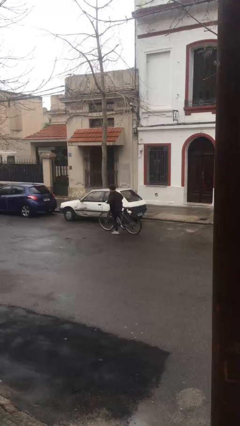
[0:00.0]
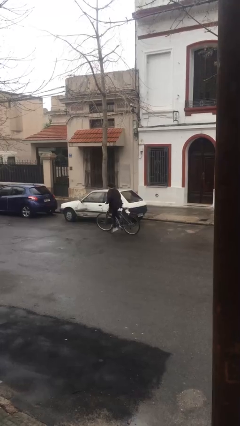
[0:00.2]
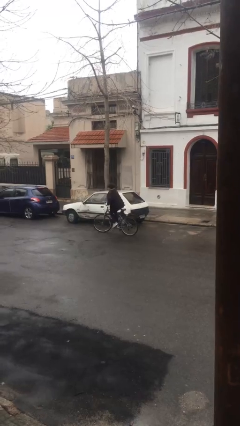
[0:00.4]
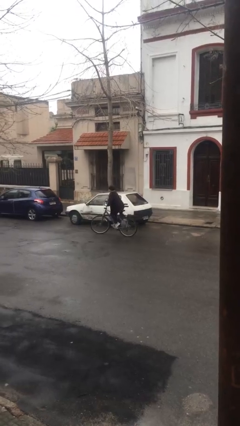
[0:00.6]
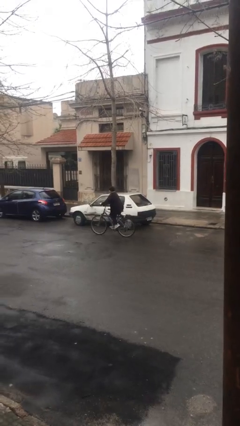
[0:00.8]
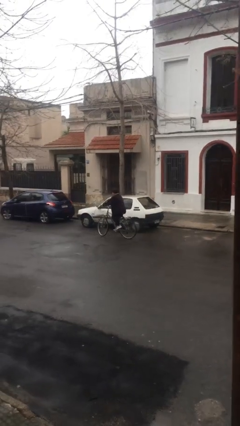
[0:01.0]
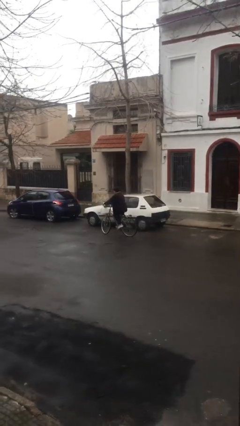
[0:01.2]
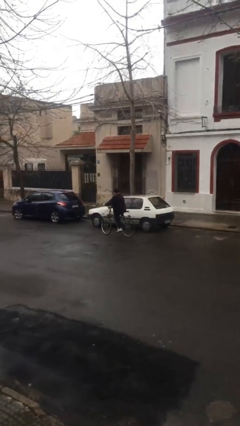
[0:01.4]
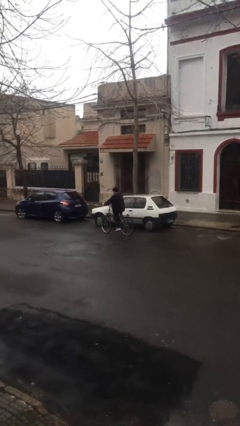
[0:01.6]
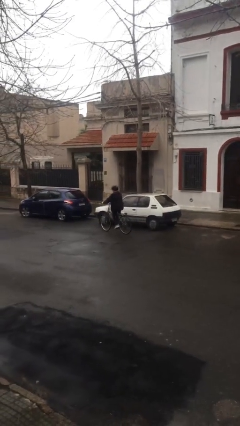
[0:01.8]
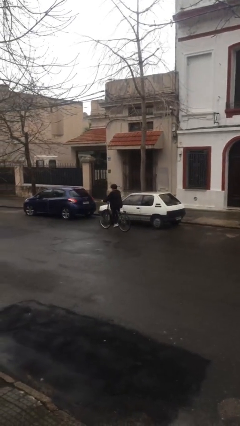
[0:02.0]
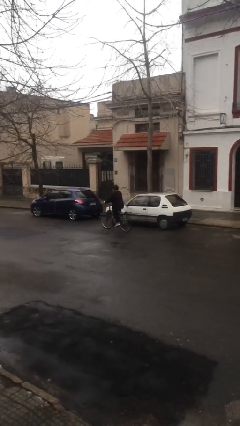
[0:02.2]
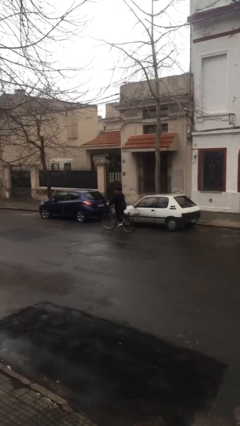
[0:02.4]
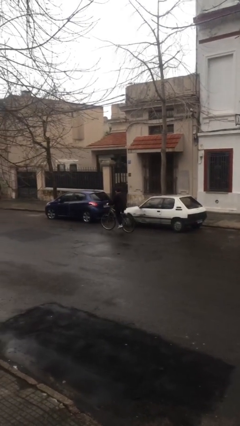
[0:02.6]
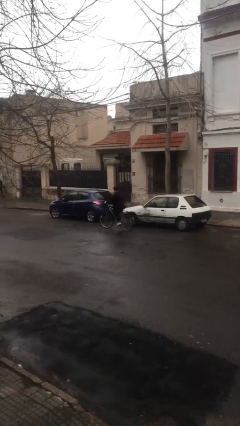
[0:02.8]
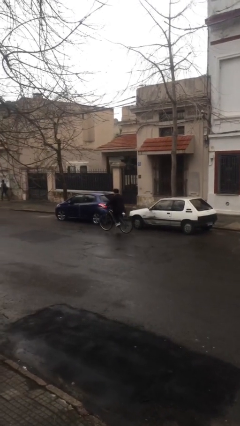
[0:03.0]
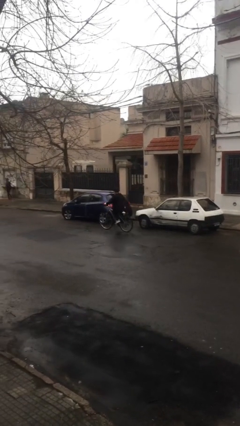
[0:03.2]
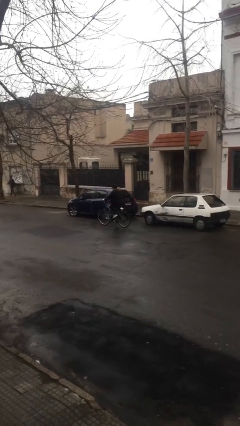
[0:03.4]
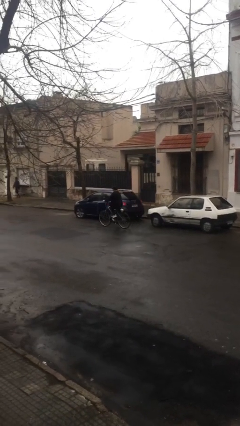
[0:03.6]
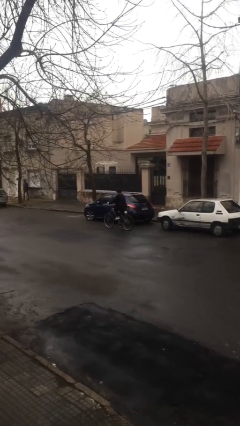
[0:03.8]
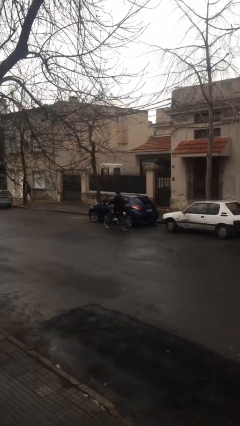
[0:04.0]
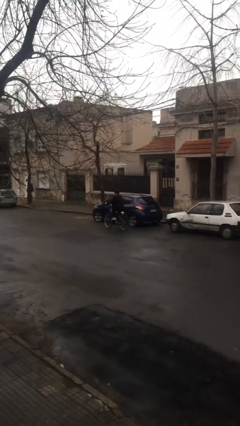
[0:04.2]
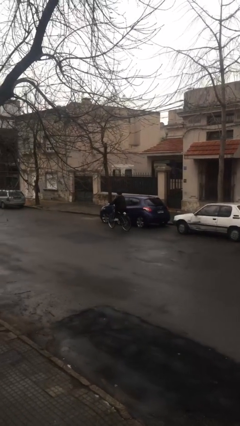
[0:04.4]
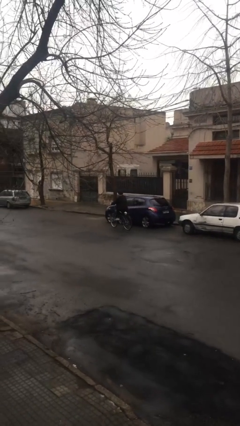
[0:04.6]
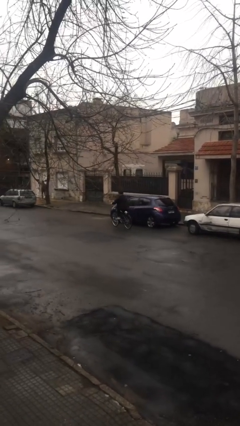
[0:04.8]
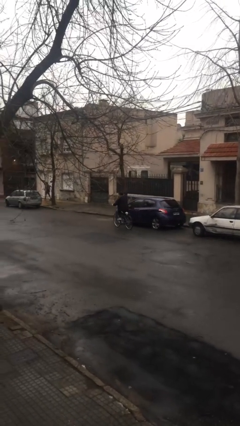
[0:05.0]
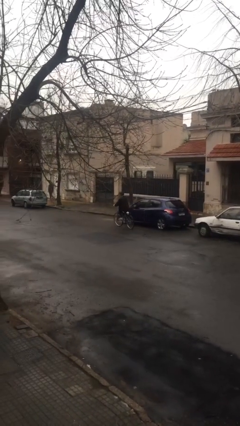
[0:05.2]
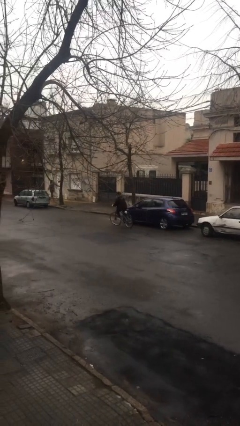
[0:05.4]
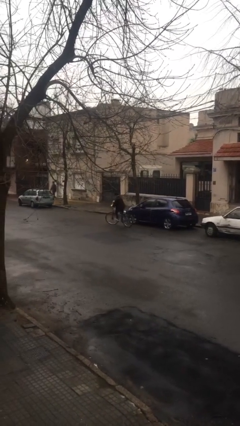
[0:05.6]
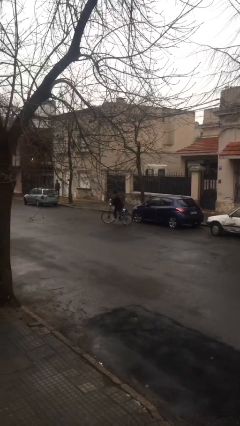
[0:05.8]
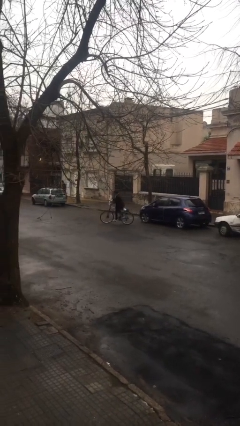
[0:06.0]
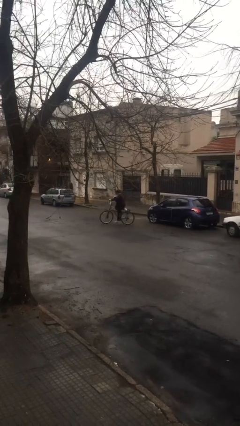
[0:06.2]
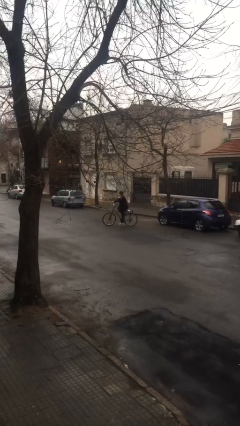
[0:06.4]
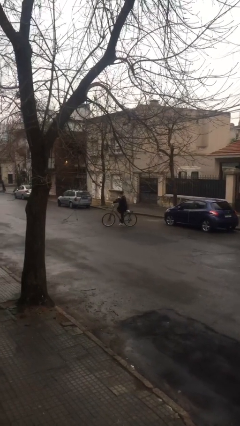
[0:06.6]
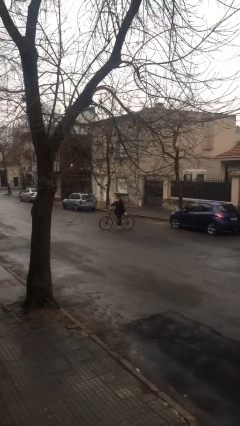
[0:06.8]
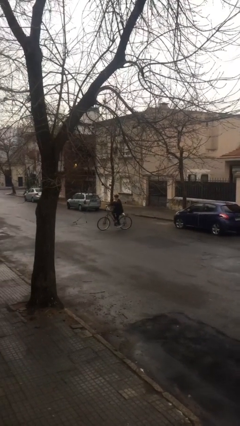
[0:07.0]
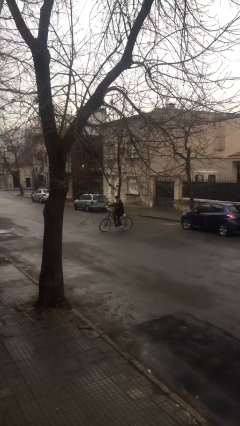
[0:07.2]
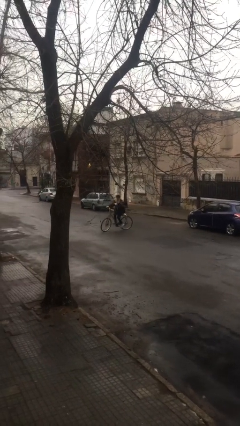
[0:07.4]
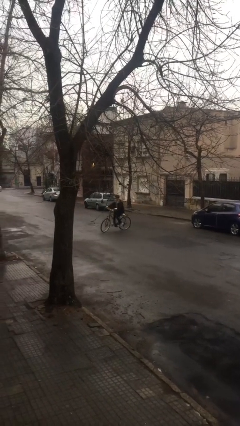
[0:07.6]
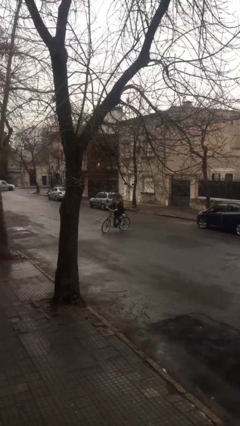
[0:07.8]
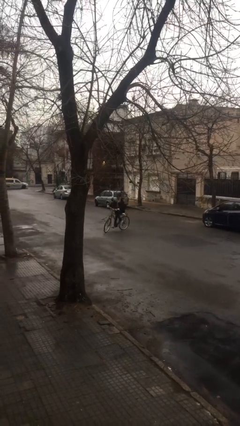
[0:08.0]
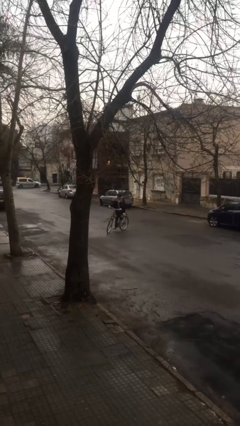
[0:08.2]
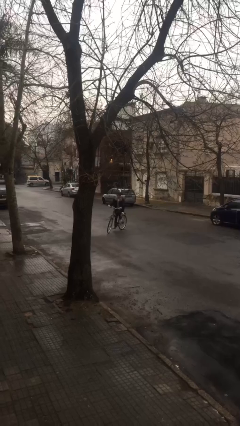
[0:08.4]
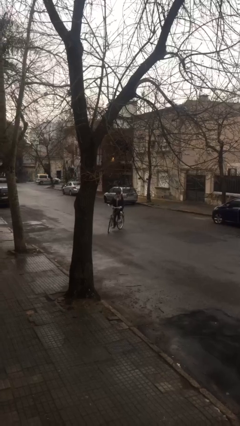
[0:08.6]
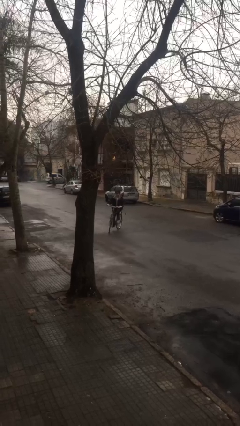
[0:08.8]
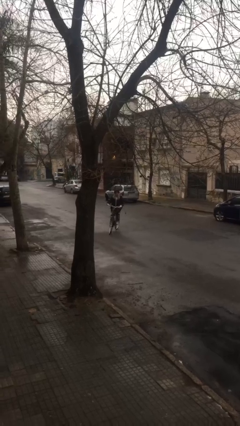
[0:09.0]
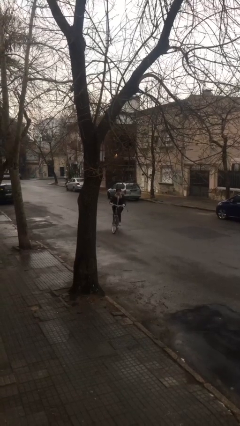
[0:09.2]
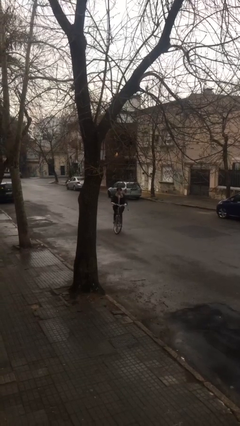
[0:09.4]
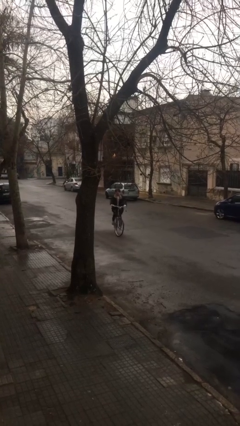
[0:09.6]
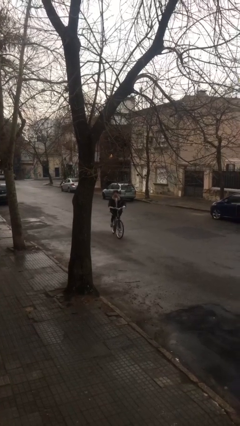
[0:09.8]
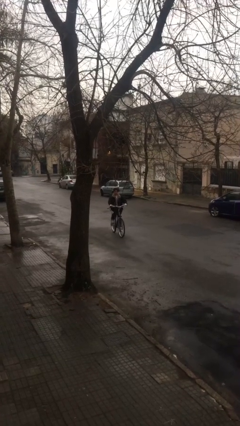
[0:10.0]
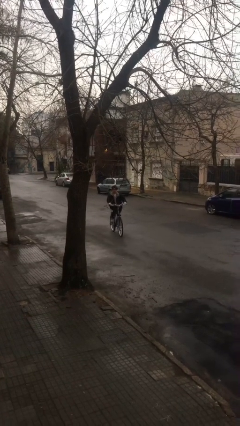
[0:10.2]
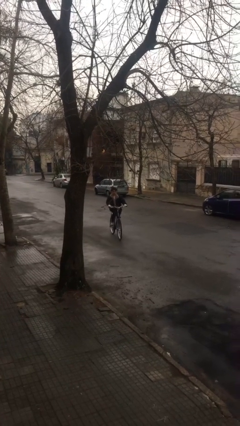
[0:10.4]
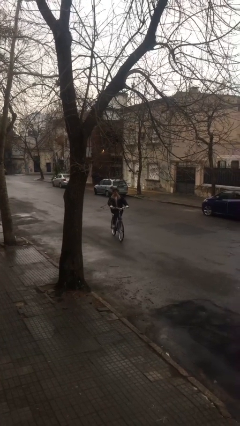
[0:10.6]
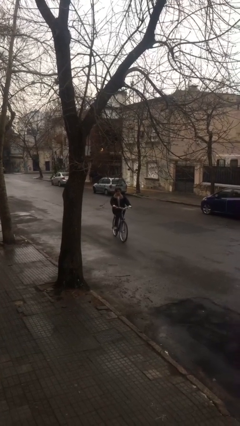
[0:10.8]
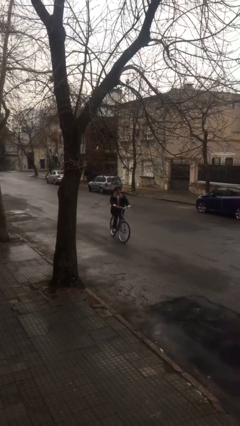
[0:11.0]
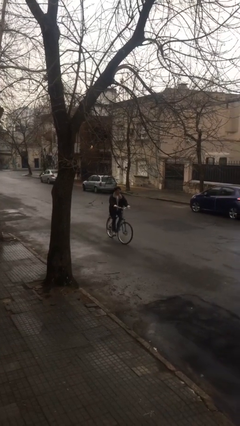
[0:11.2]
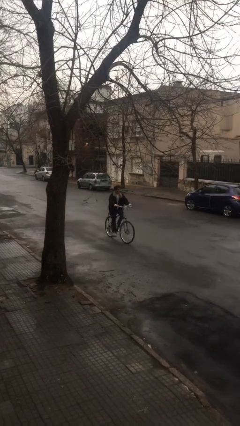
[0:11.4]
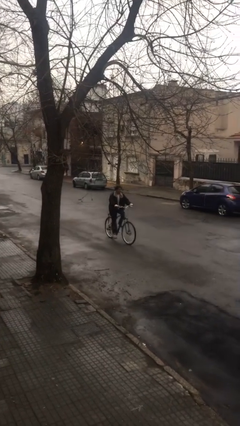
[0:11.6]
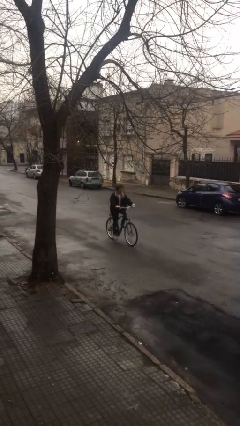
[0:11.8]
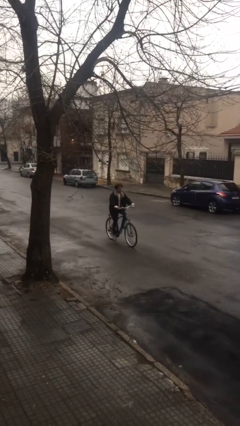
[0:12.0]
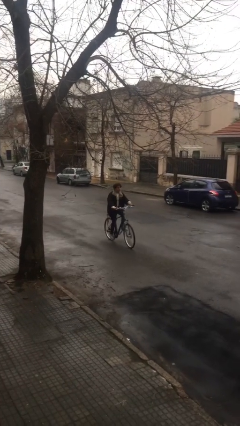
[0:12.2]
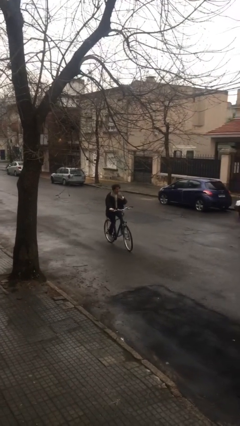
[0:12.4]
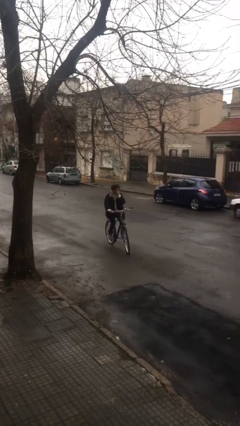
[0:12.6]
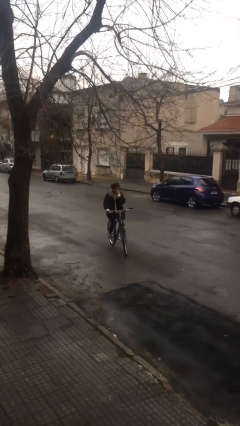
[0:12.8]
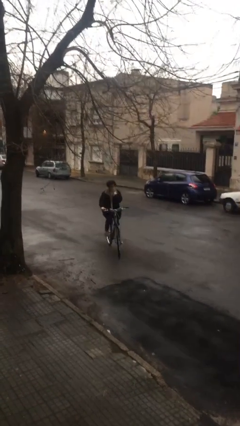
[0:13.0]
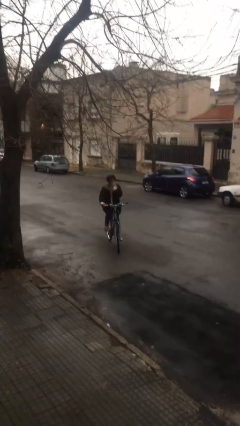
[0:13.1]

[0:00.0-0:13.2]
person rides bicycle

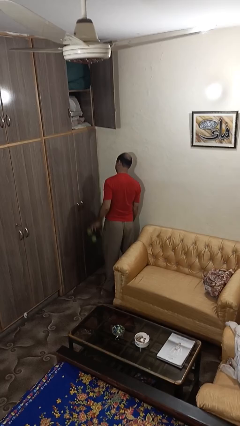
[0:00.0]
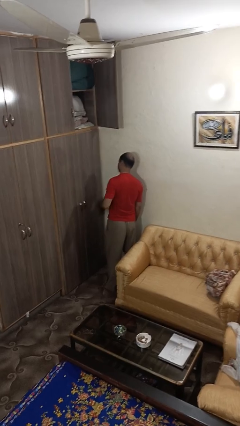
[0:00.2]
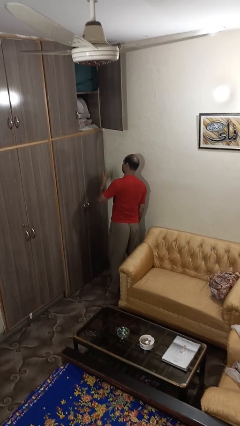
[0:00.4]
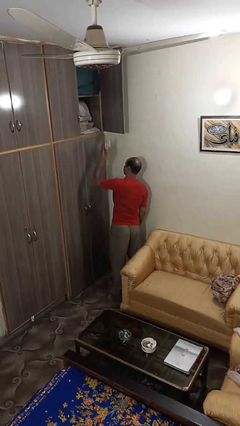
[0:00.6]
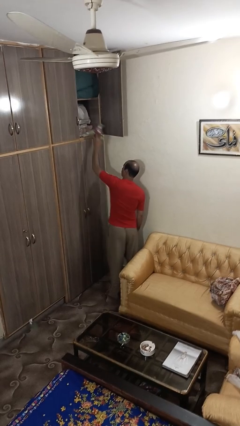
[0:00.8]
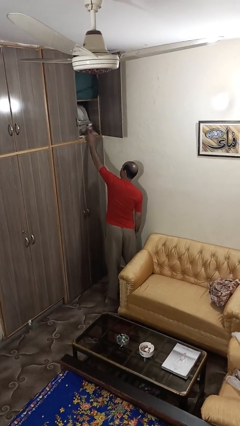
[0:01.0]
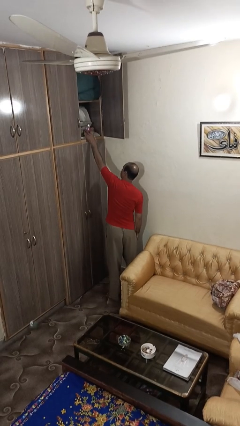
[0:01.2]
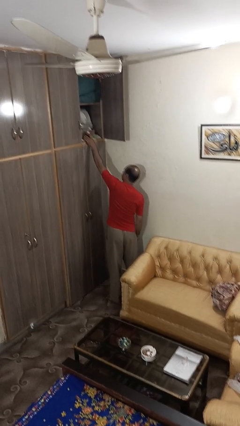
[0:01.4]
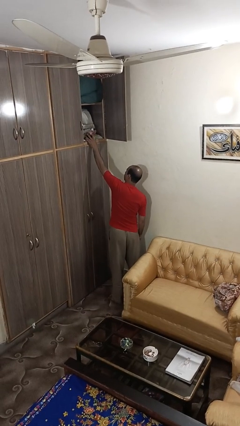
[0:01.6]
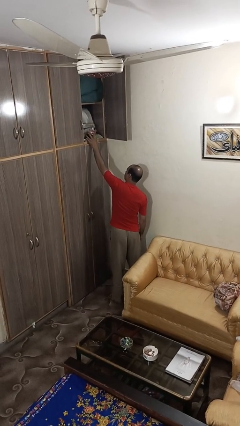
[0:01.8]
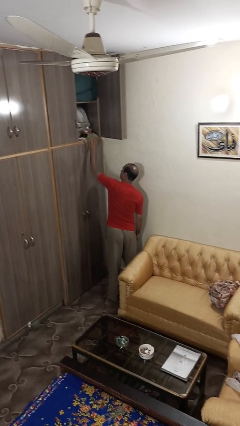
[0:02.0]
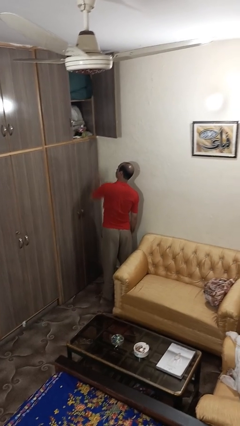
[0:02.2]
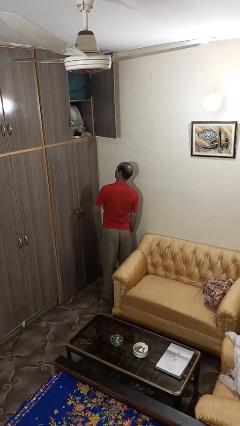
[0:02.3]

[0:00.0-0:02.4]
person puts down object on shelf

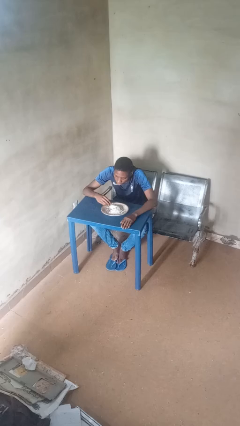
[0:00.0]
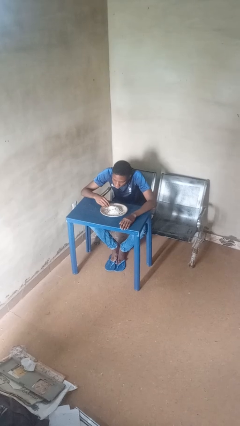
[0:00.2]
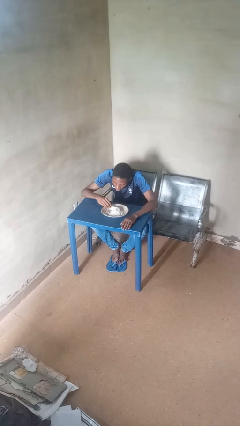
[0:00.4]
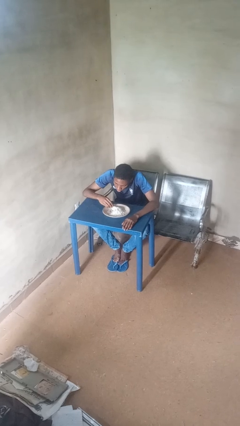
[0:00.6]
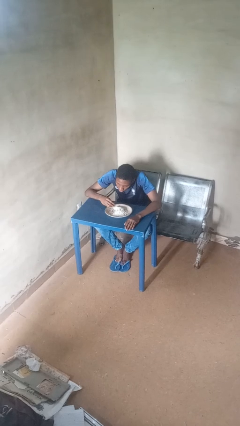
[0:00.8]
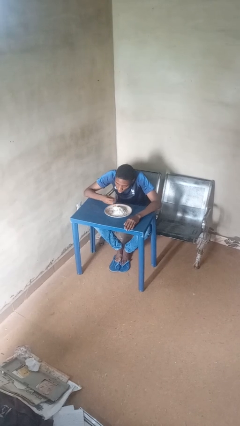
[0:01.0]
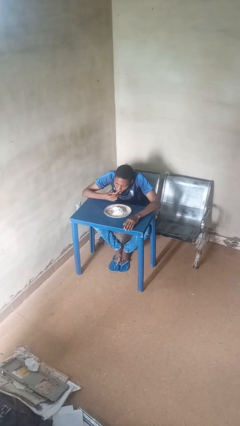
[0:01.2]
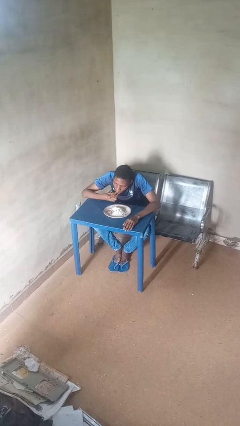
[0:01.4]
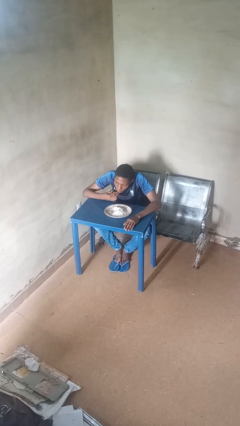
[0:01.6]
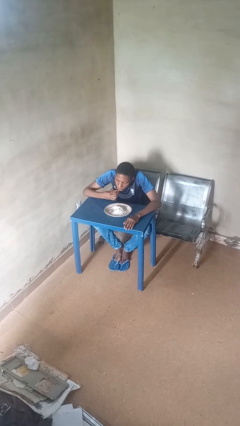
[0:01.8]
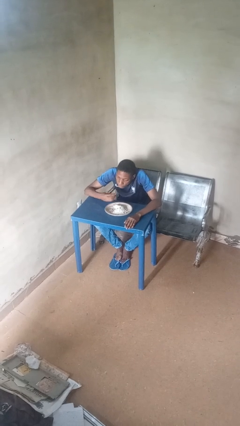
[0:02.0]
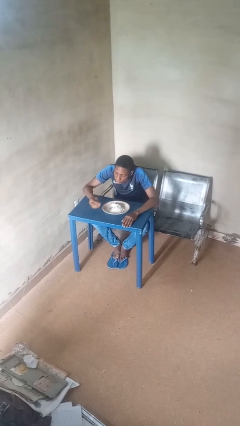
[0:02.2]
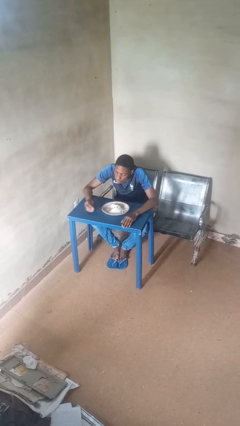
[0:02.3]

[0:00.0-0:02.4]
person eats with hands
